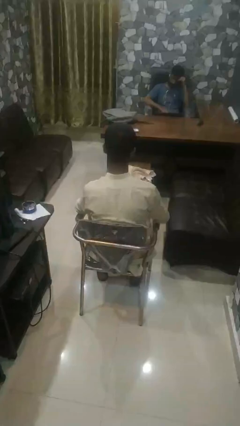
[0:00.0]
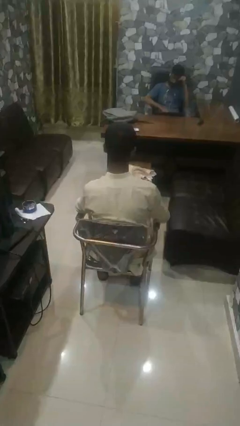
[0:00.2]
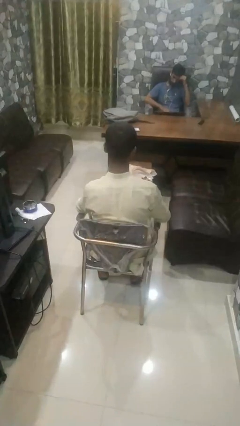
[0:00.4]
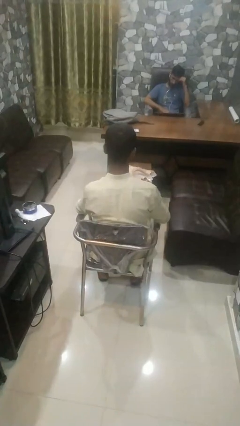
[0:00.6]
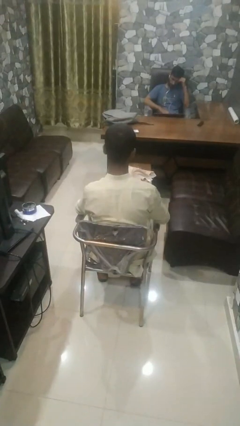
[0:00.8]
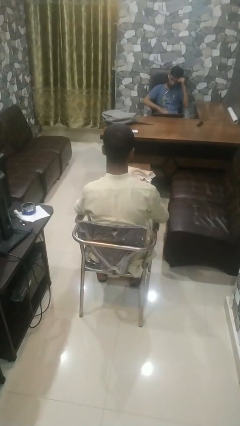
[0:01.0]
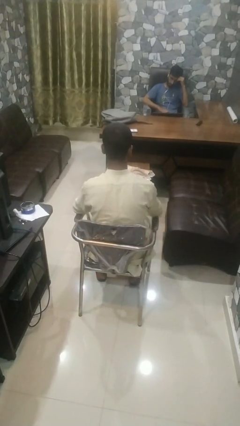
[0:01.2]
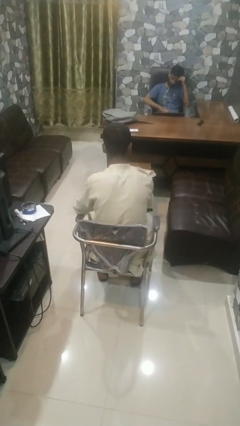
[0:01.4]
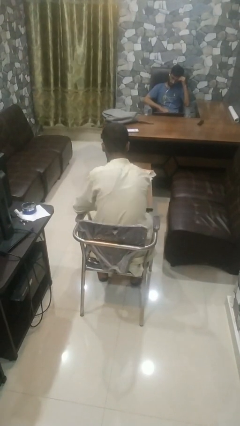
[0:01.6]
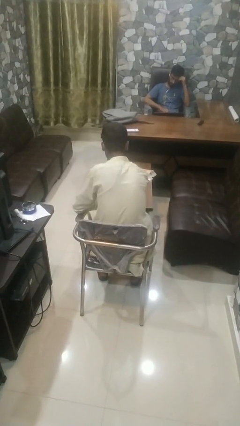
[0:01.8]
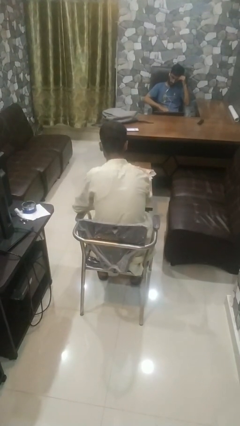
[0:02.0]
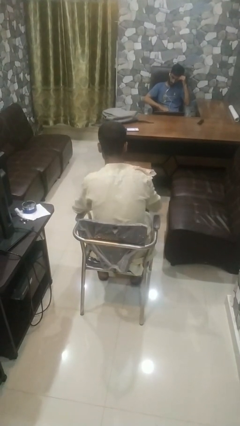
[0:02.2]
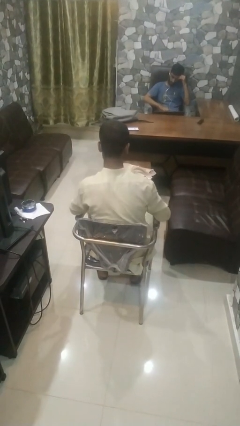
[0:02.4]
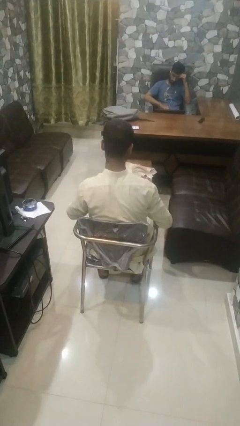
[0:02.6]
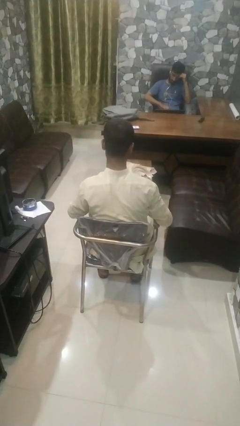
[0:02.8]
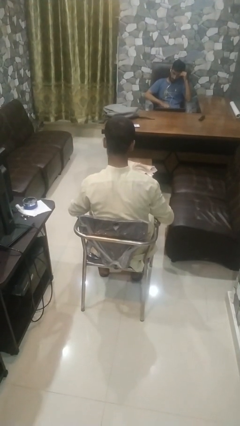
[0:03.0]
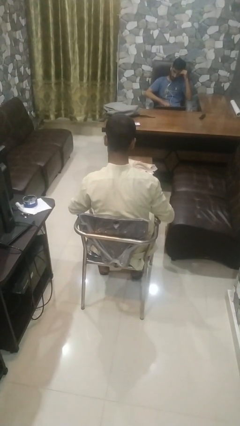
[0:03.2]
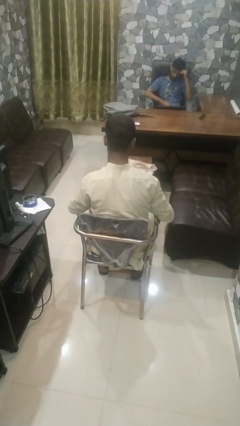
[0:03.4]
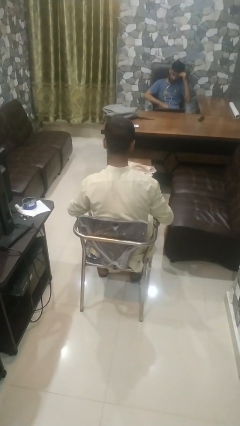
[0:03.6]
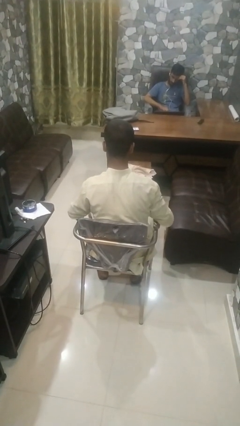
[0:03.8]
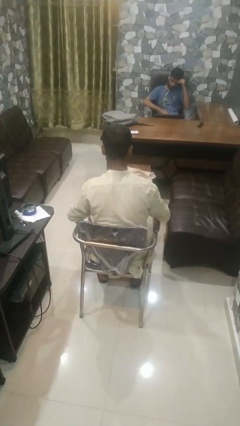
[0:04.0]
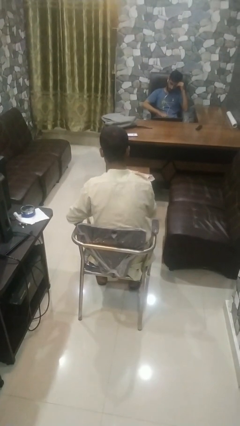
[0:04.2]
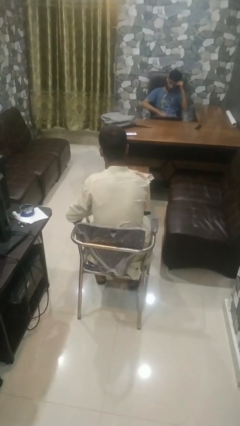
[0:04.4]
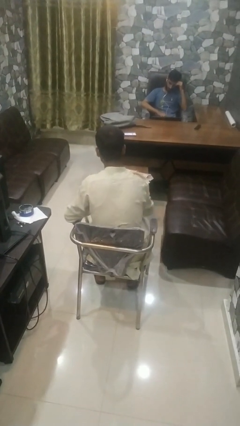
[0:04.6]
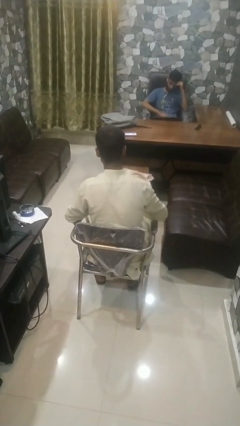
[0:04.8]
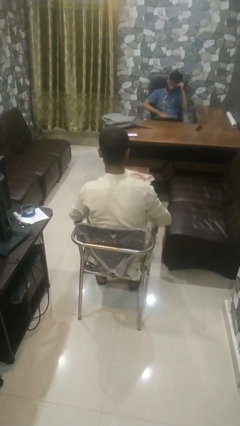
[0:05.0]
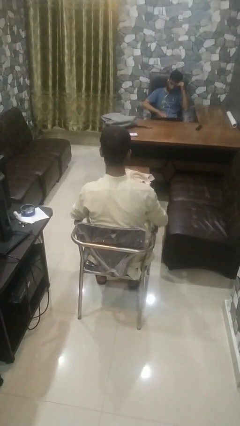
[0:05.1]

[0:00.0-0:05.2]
person paints fingernails

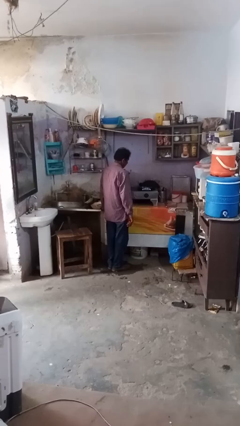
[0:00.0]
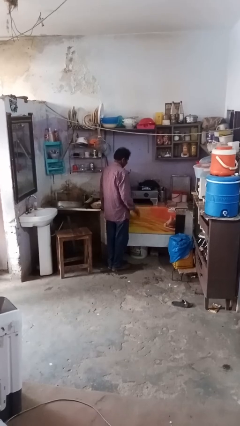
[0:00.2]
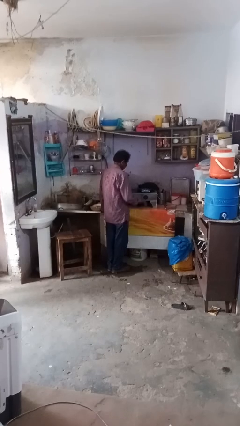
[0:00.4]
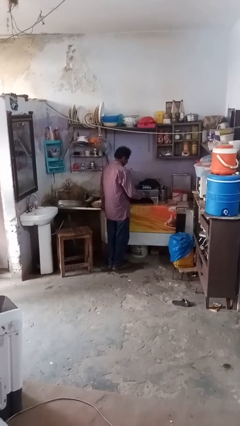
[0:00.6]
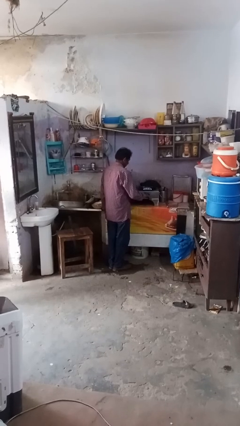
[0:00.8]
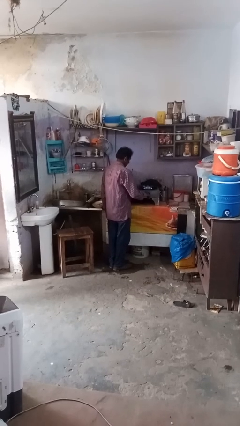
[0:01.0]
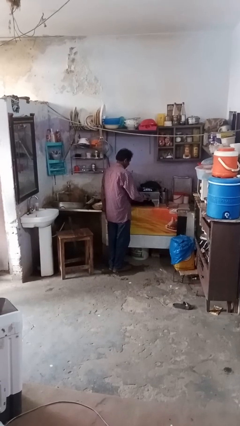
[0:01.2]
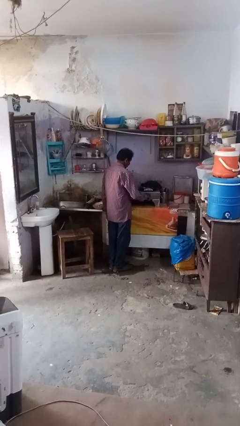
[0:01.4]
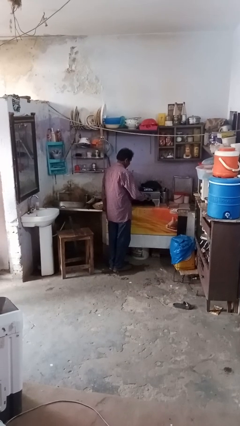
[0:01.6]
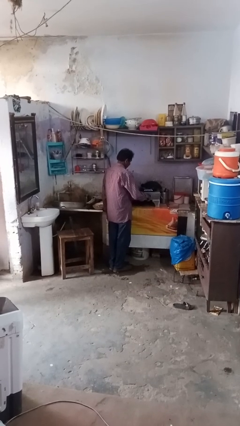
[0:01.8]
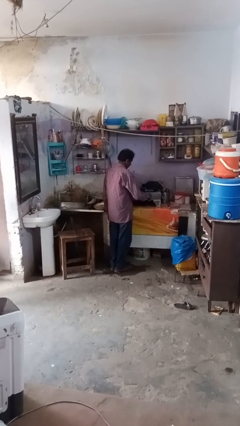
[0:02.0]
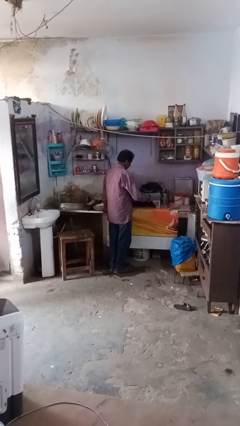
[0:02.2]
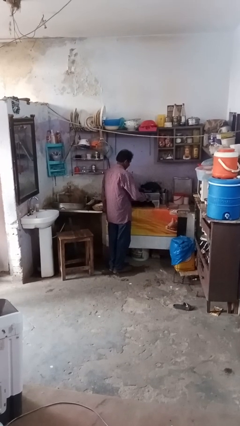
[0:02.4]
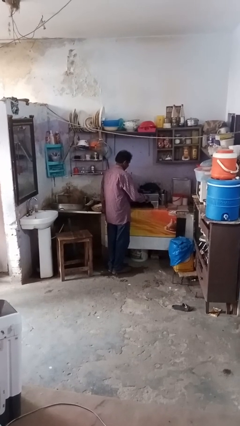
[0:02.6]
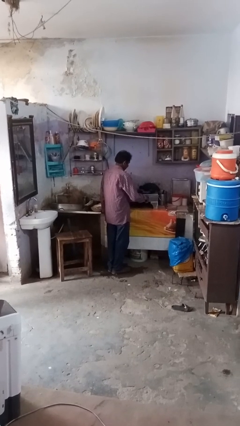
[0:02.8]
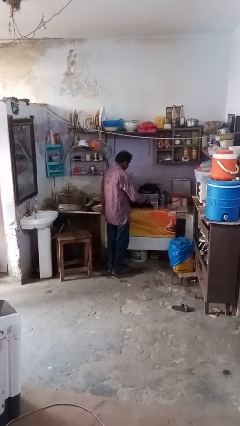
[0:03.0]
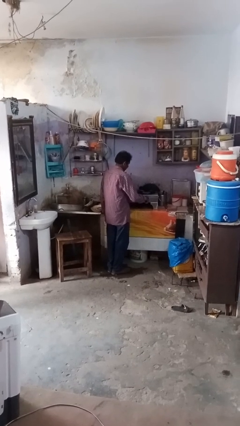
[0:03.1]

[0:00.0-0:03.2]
person turns off stovetop

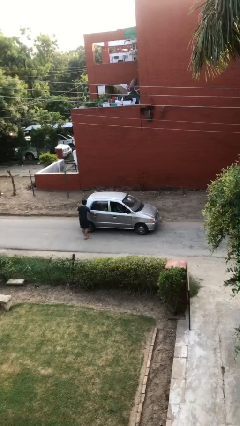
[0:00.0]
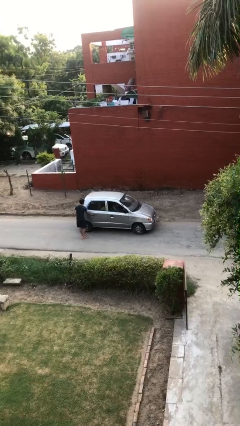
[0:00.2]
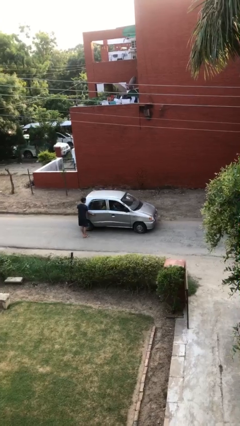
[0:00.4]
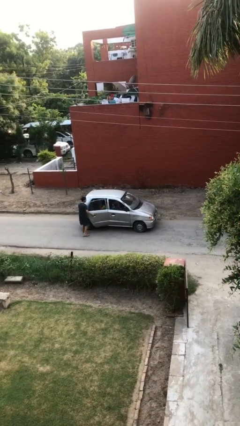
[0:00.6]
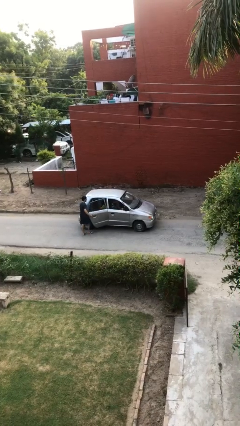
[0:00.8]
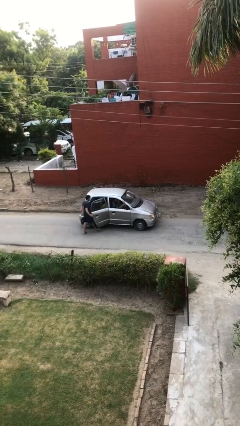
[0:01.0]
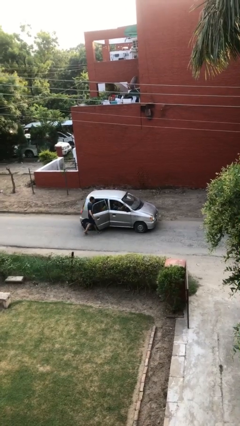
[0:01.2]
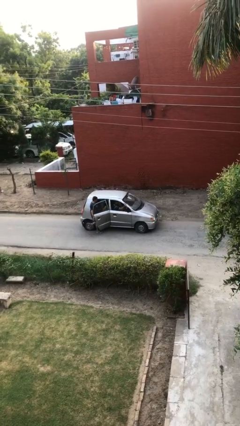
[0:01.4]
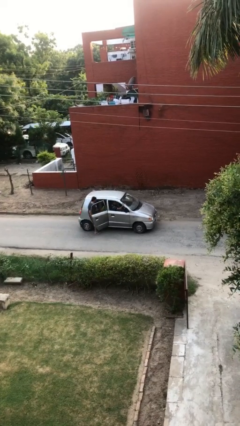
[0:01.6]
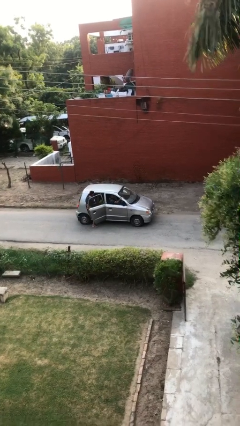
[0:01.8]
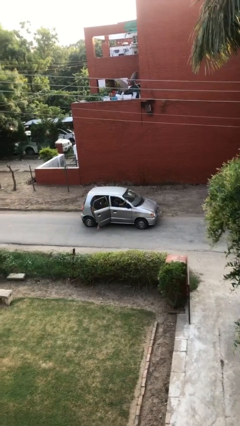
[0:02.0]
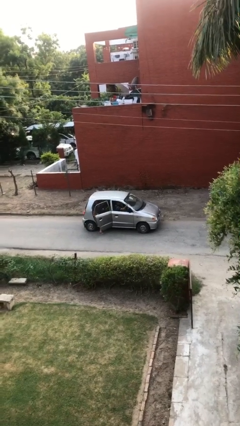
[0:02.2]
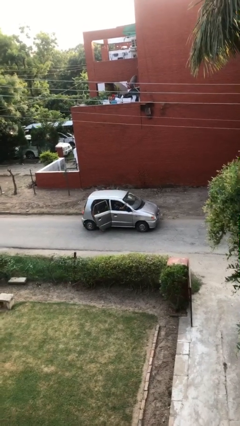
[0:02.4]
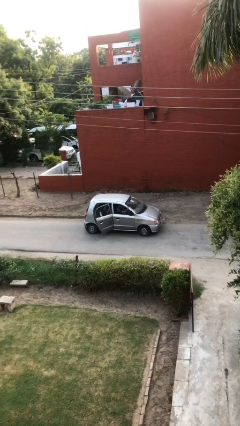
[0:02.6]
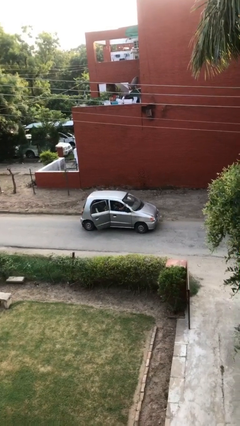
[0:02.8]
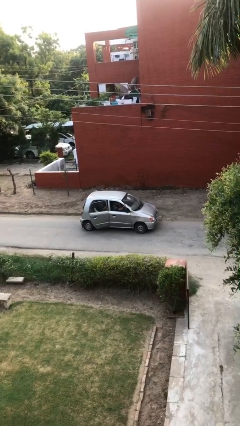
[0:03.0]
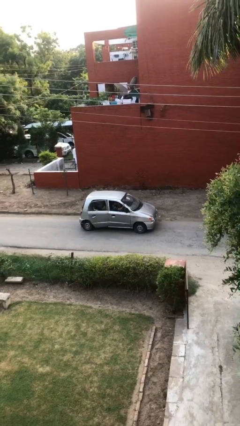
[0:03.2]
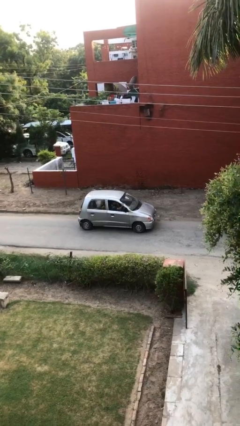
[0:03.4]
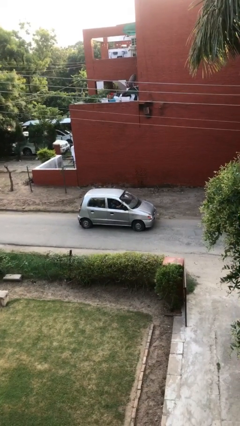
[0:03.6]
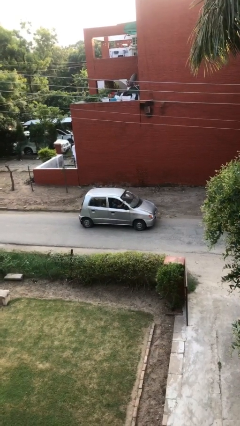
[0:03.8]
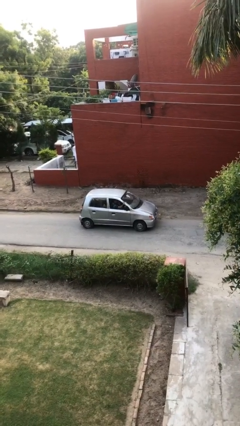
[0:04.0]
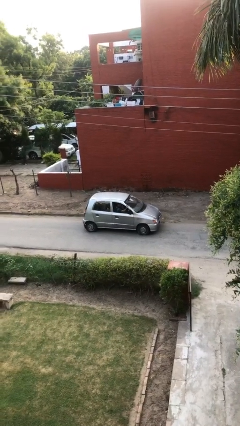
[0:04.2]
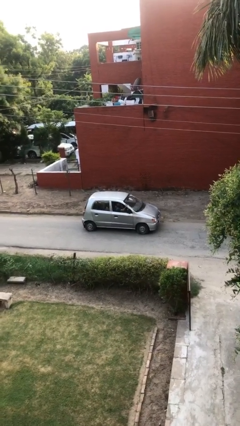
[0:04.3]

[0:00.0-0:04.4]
car picks up person

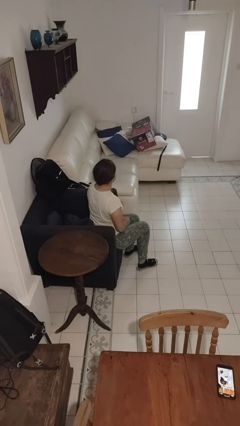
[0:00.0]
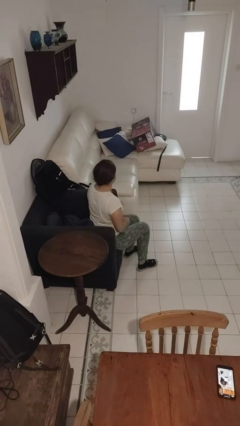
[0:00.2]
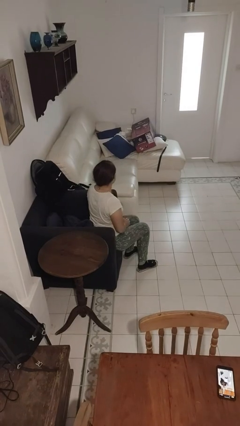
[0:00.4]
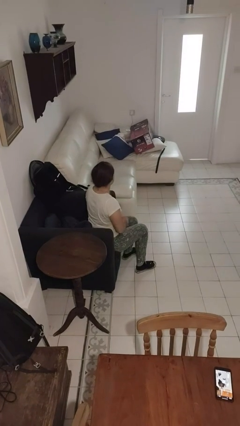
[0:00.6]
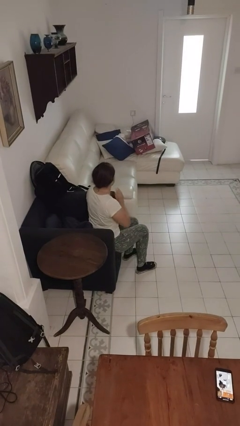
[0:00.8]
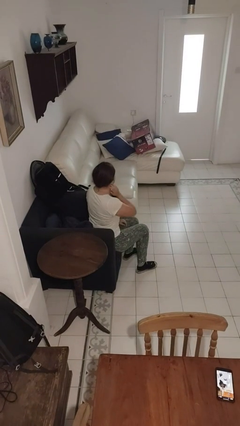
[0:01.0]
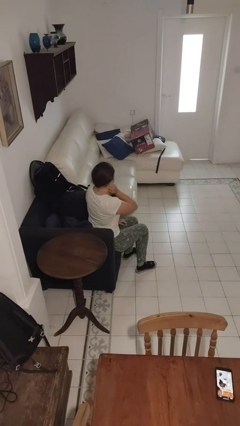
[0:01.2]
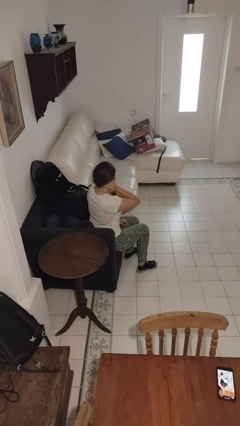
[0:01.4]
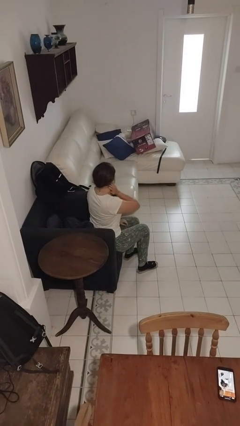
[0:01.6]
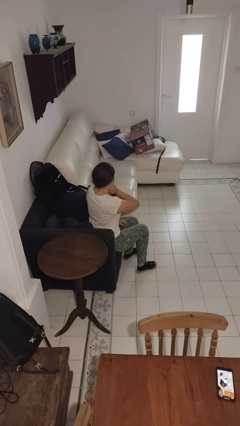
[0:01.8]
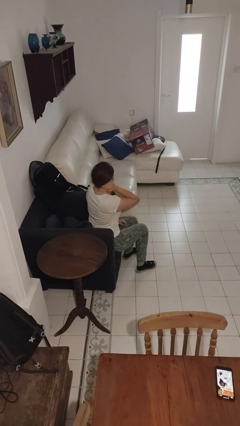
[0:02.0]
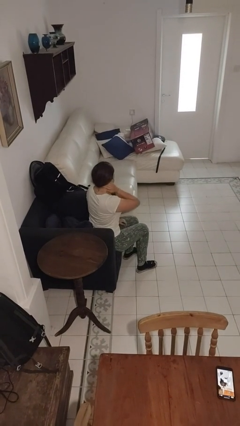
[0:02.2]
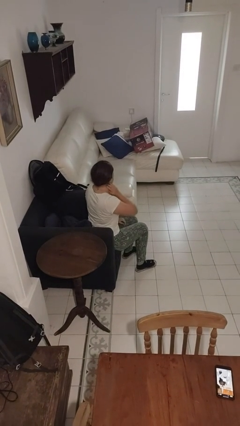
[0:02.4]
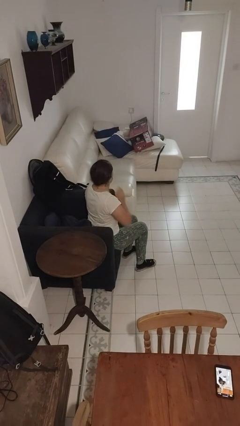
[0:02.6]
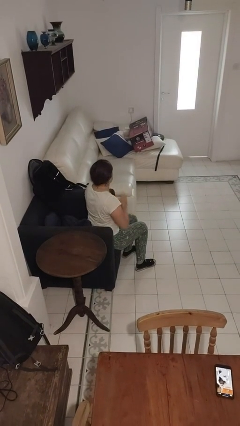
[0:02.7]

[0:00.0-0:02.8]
person rubs neck

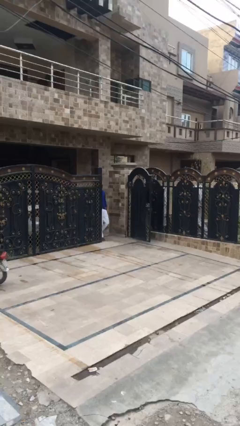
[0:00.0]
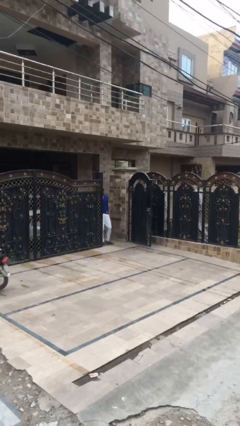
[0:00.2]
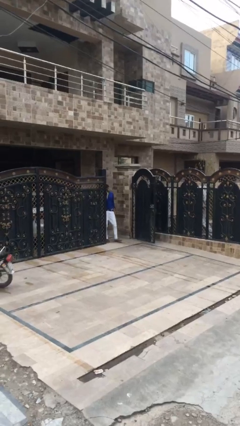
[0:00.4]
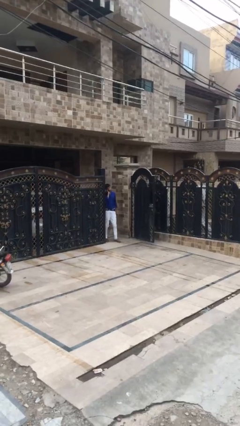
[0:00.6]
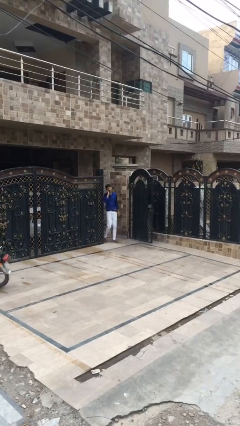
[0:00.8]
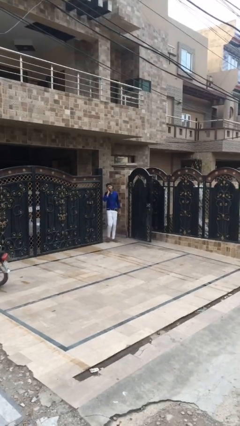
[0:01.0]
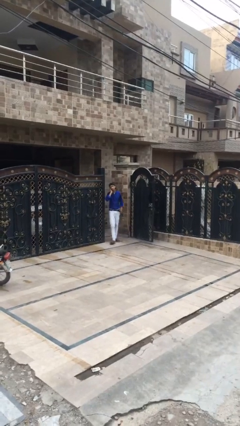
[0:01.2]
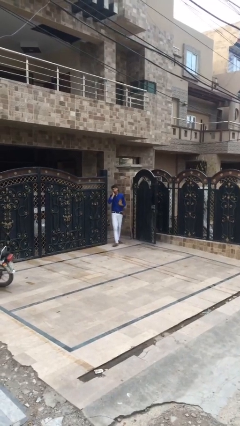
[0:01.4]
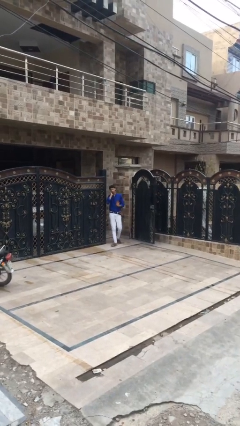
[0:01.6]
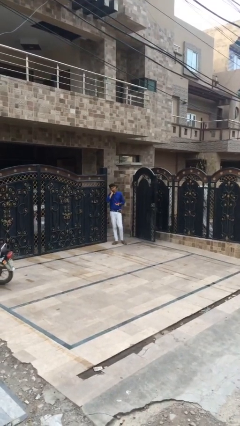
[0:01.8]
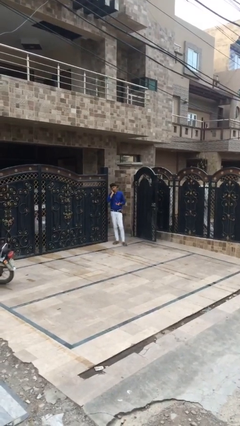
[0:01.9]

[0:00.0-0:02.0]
person enters scene through structure
